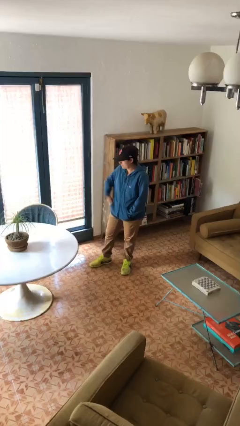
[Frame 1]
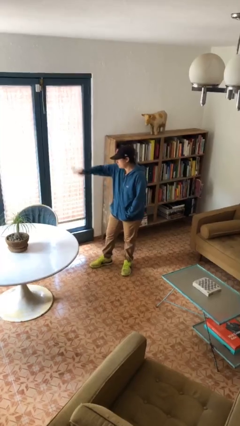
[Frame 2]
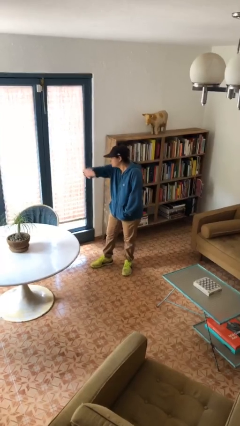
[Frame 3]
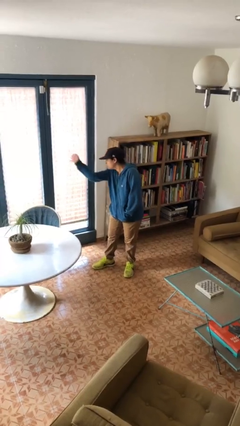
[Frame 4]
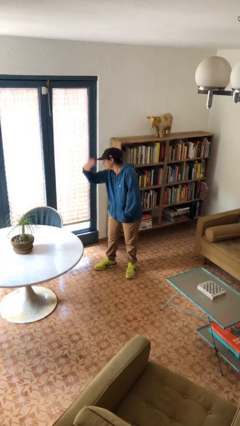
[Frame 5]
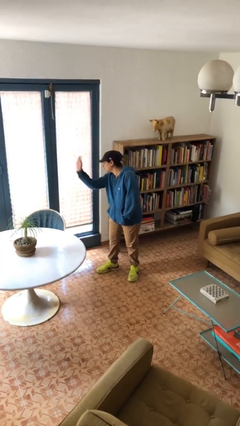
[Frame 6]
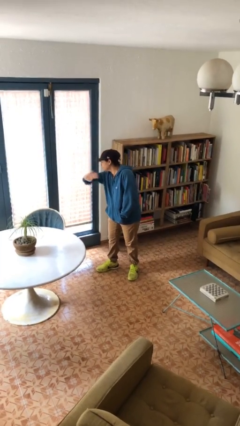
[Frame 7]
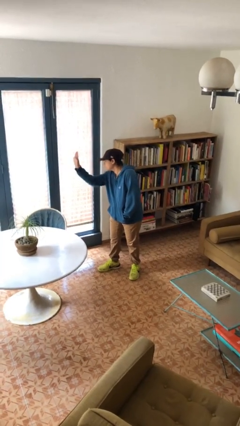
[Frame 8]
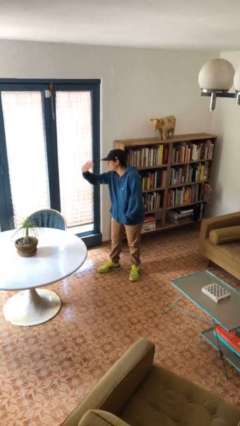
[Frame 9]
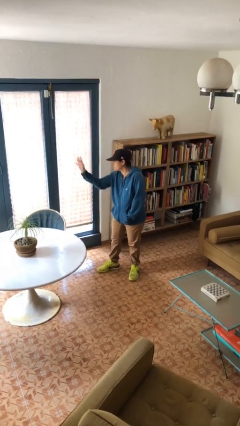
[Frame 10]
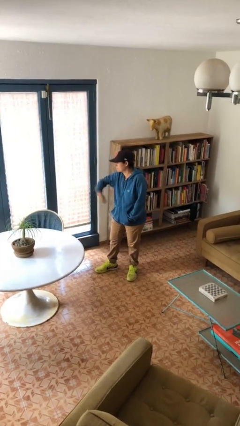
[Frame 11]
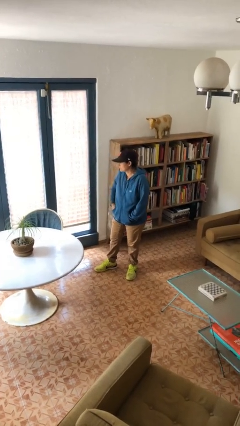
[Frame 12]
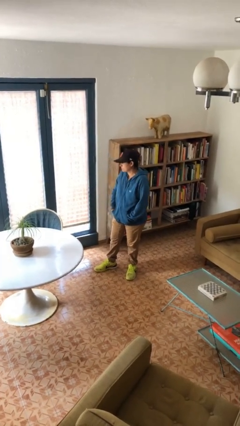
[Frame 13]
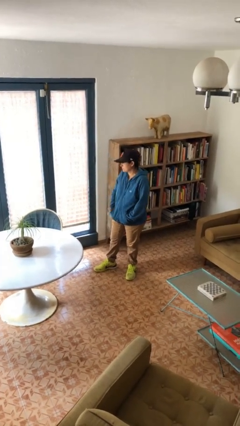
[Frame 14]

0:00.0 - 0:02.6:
person waves at person

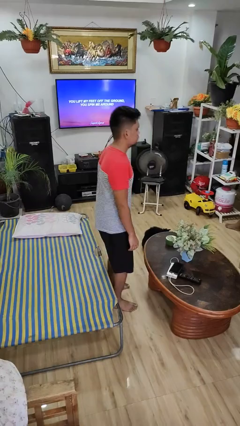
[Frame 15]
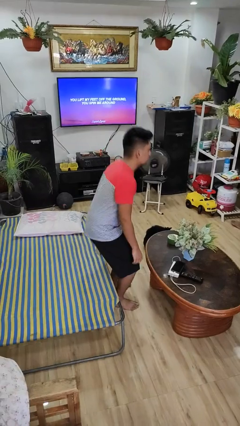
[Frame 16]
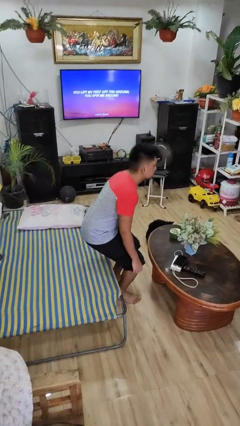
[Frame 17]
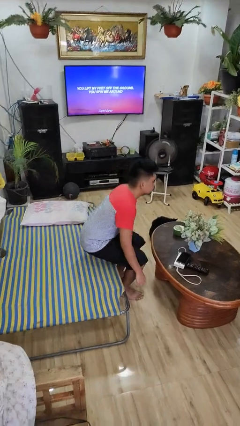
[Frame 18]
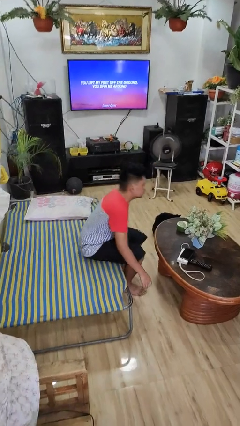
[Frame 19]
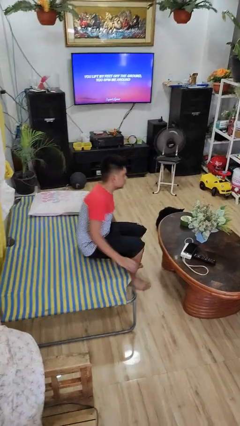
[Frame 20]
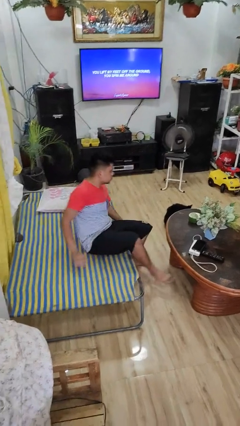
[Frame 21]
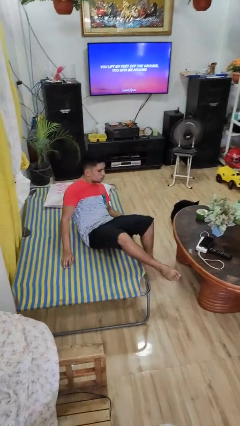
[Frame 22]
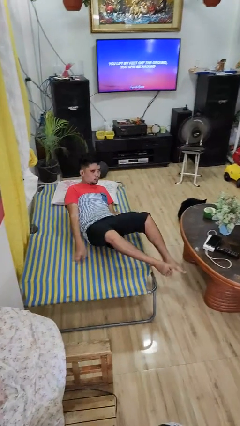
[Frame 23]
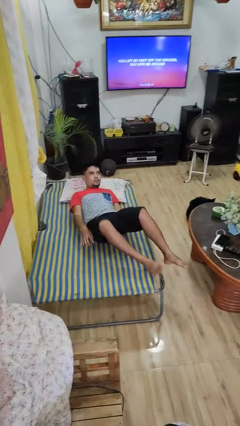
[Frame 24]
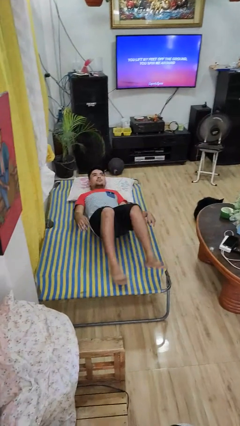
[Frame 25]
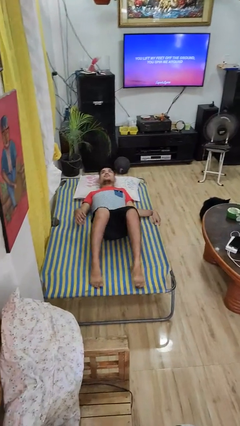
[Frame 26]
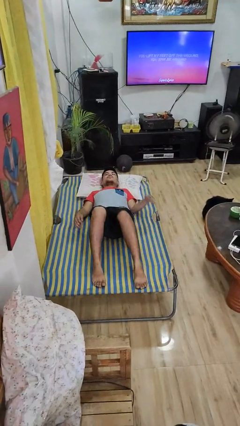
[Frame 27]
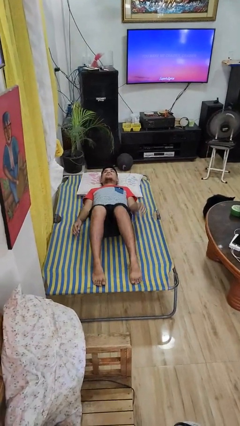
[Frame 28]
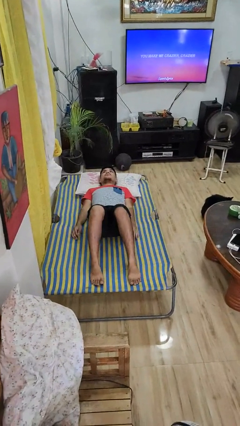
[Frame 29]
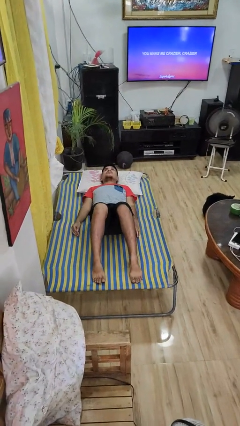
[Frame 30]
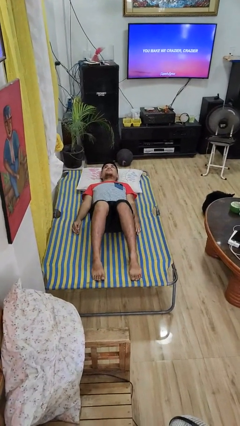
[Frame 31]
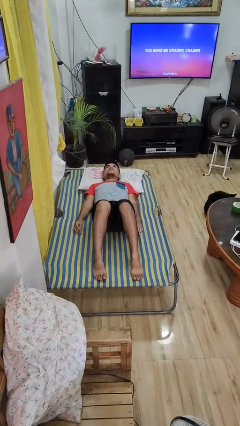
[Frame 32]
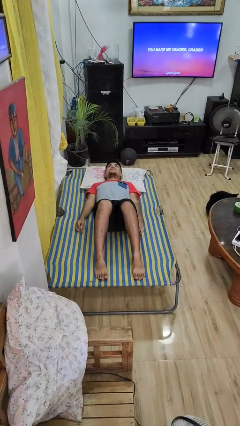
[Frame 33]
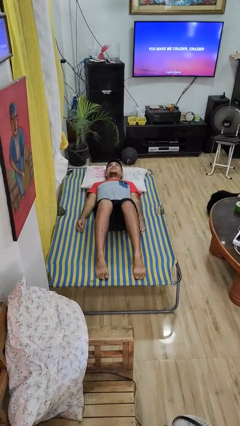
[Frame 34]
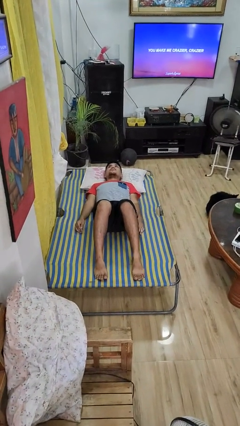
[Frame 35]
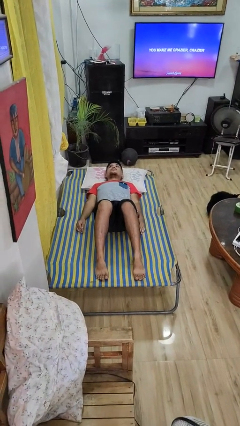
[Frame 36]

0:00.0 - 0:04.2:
person lies down on bed

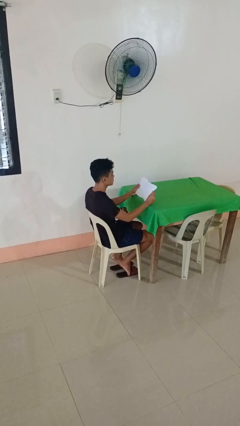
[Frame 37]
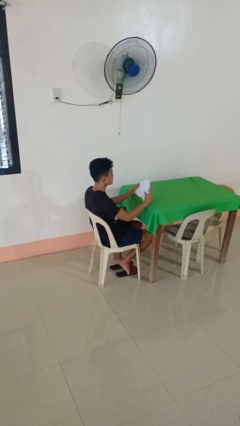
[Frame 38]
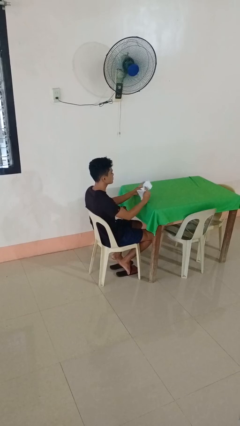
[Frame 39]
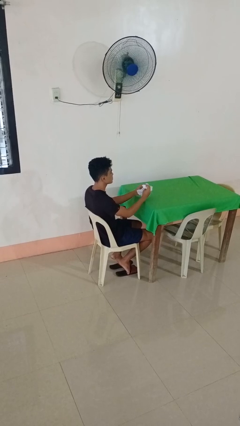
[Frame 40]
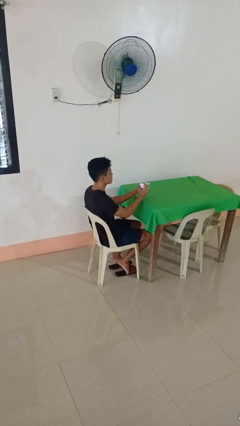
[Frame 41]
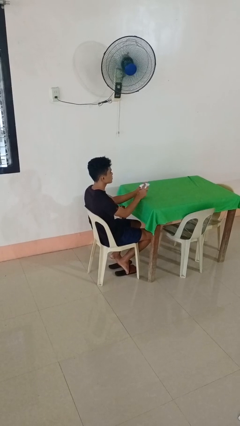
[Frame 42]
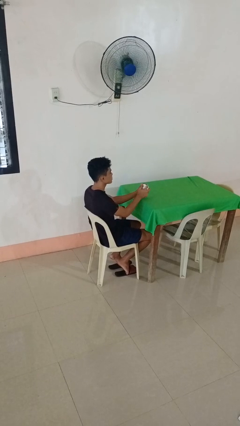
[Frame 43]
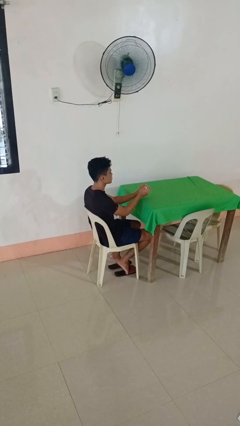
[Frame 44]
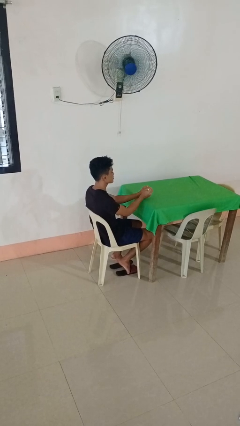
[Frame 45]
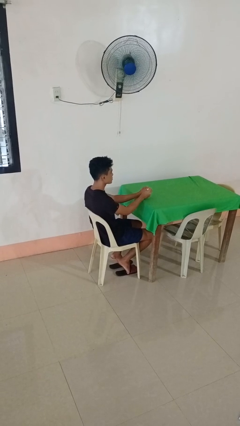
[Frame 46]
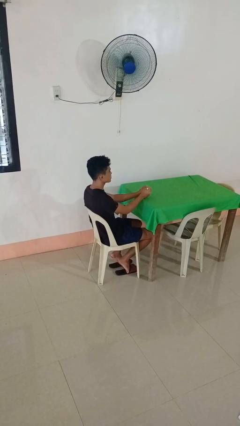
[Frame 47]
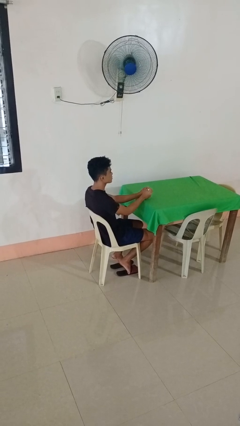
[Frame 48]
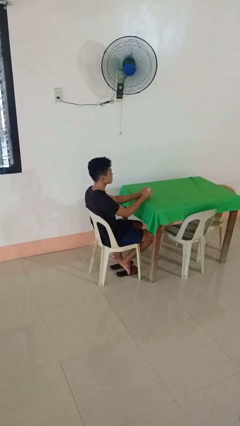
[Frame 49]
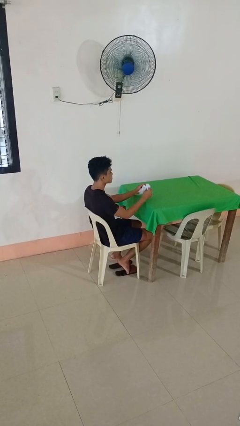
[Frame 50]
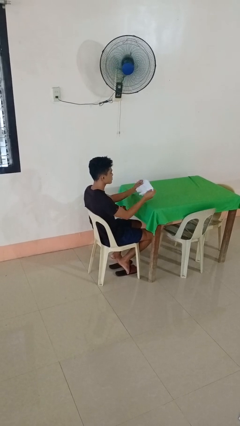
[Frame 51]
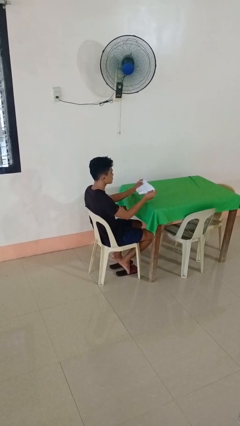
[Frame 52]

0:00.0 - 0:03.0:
person crumples paper

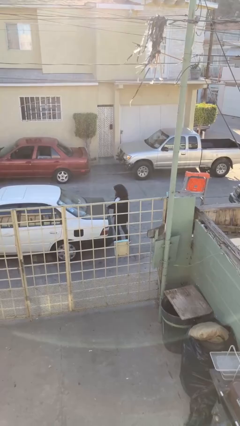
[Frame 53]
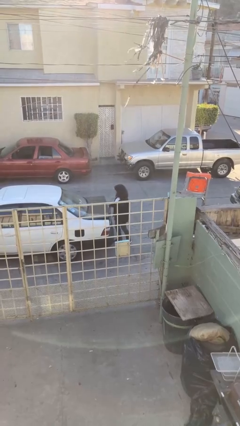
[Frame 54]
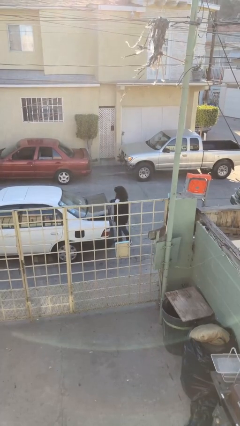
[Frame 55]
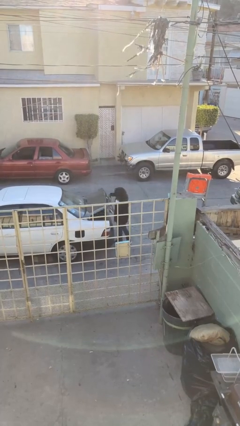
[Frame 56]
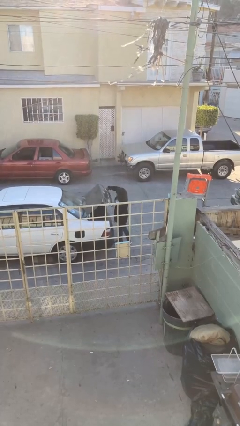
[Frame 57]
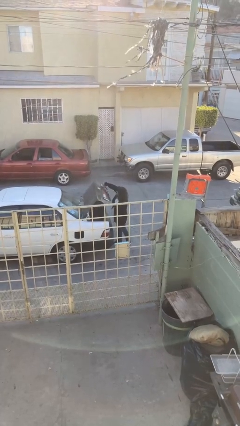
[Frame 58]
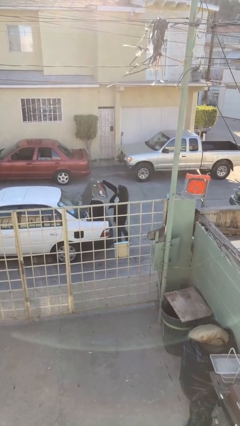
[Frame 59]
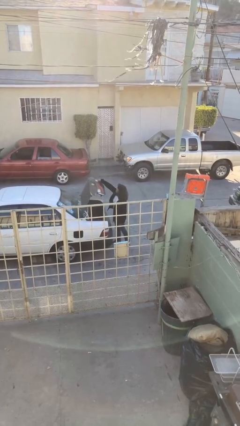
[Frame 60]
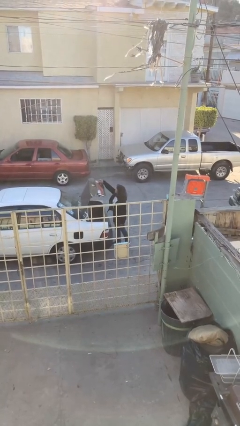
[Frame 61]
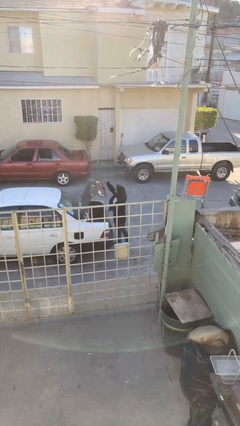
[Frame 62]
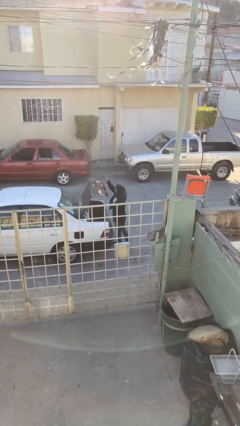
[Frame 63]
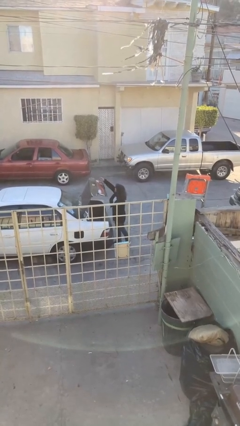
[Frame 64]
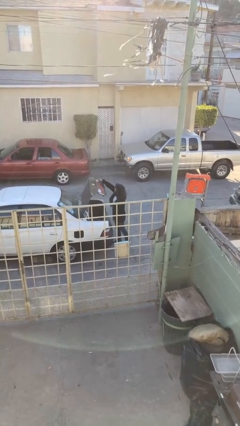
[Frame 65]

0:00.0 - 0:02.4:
person opens car trunk

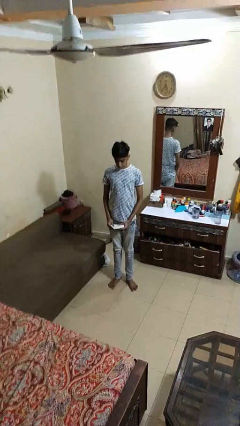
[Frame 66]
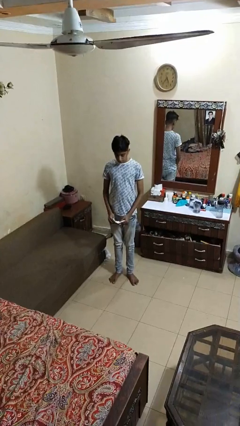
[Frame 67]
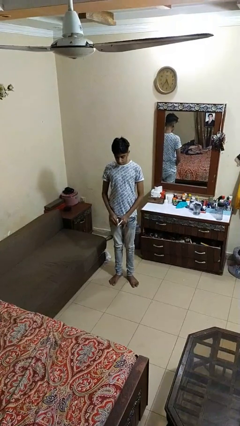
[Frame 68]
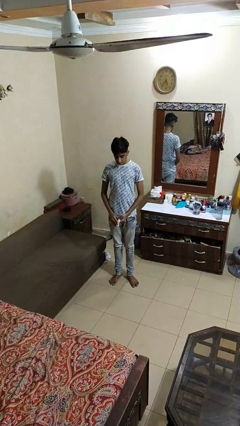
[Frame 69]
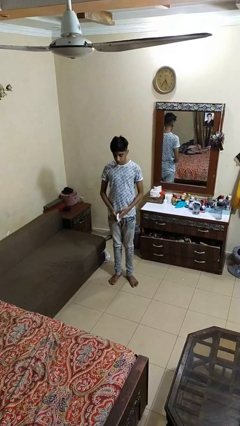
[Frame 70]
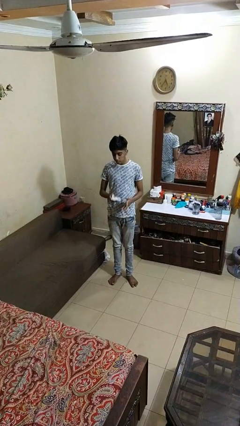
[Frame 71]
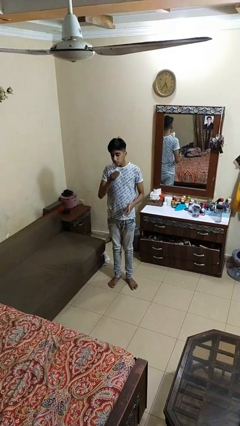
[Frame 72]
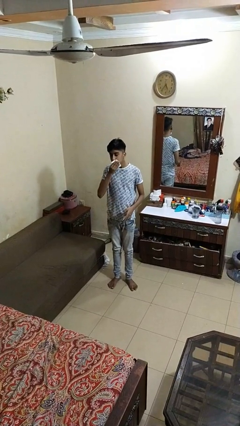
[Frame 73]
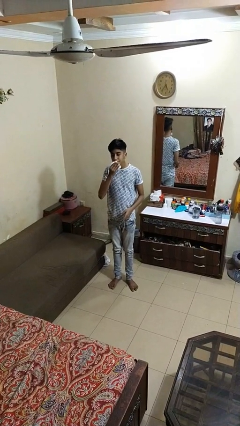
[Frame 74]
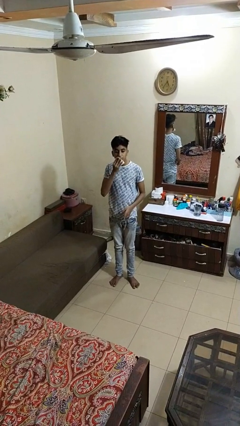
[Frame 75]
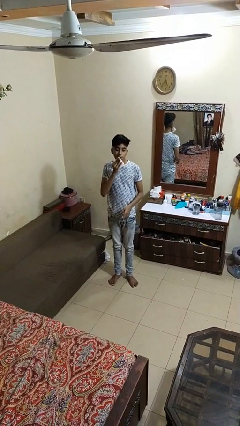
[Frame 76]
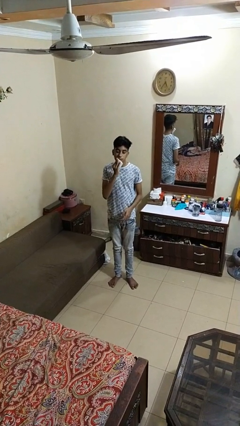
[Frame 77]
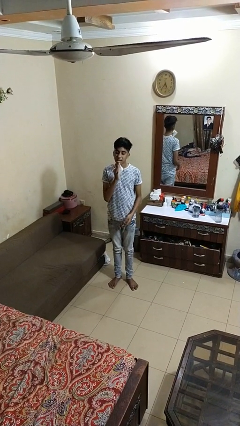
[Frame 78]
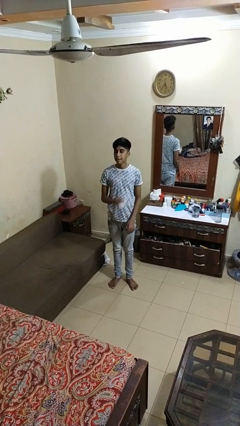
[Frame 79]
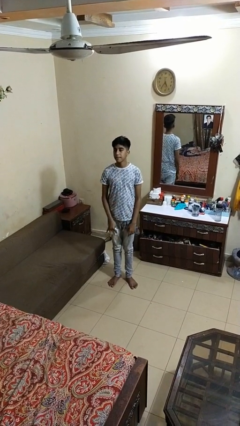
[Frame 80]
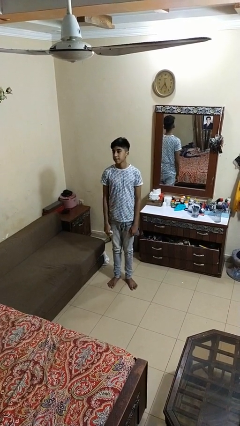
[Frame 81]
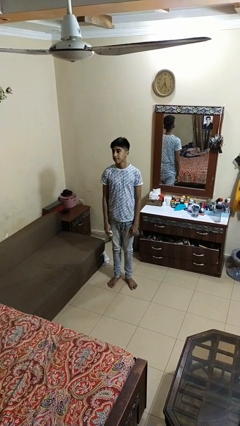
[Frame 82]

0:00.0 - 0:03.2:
person wipes mouth with napkin

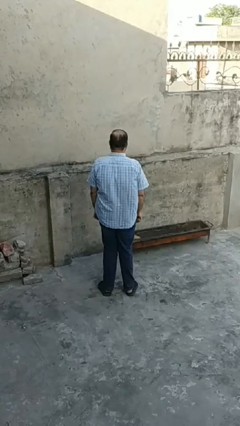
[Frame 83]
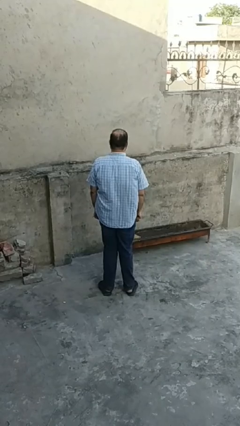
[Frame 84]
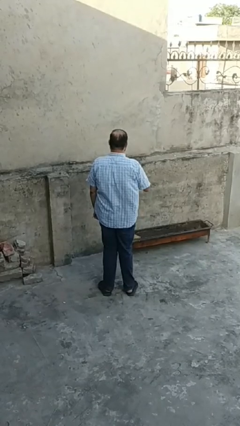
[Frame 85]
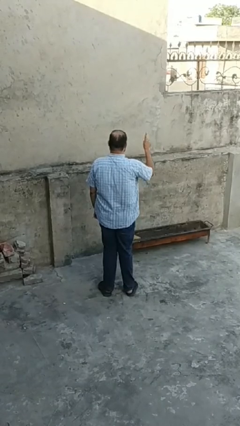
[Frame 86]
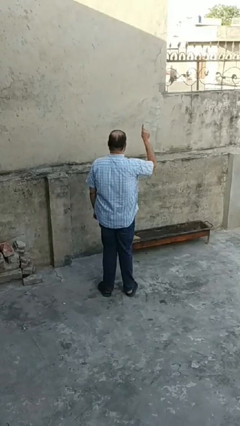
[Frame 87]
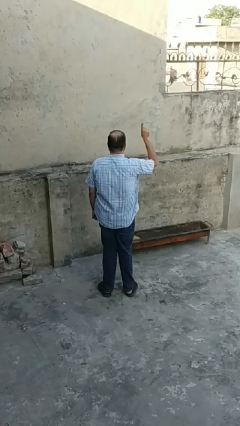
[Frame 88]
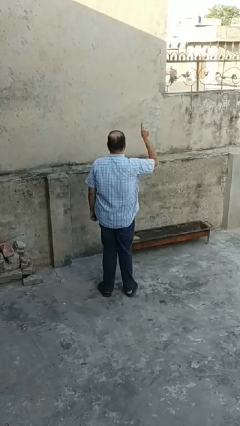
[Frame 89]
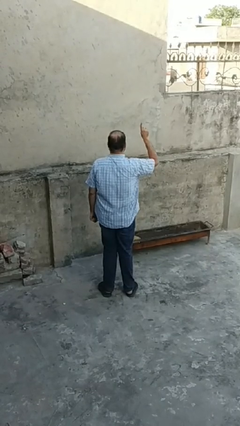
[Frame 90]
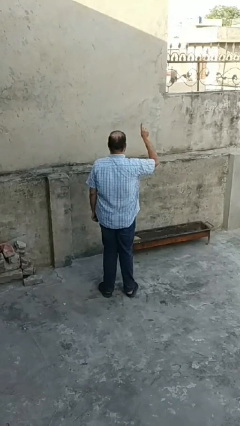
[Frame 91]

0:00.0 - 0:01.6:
person gestures number one
